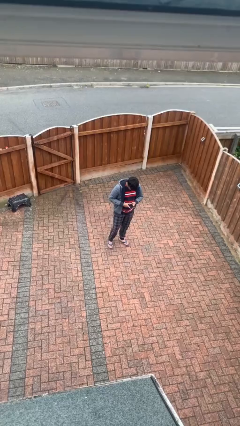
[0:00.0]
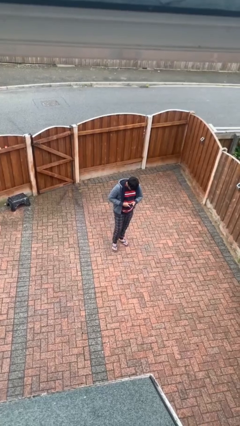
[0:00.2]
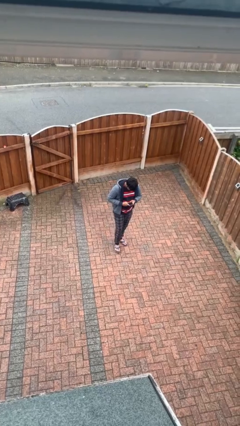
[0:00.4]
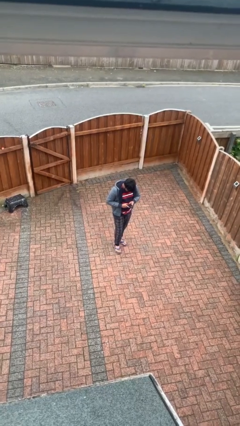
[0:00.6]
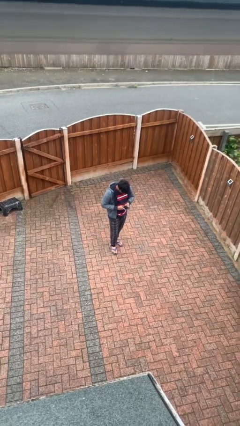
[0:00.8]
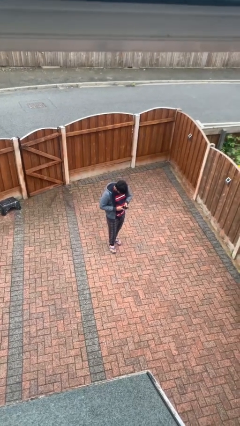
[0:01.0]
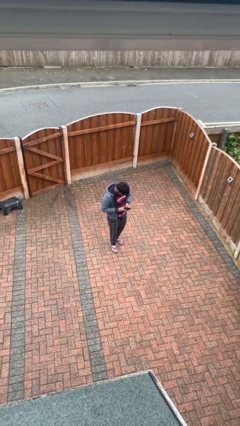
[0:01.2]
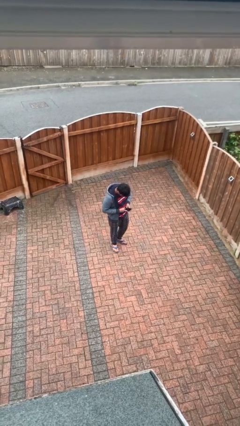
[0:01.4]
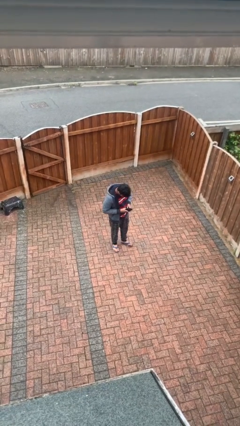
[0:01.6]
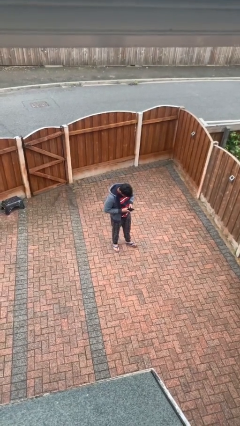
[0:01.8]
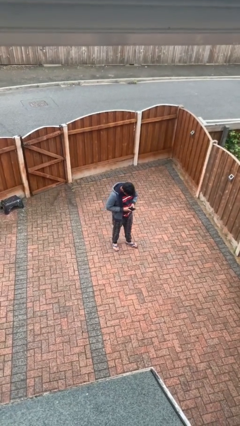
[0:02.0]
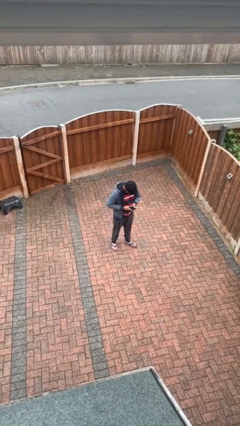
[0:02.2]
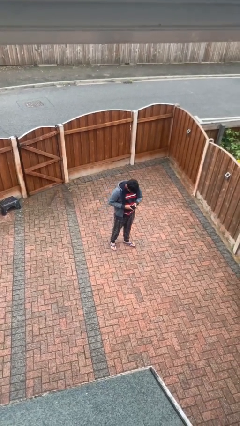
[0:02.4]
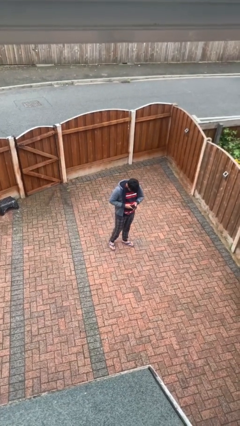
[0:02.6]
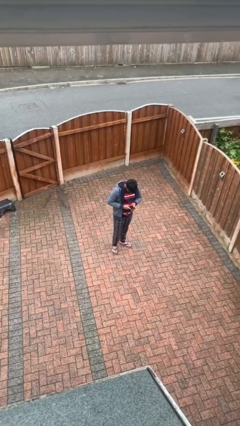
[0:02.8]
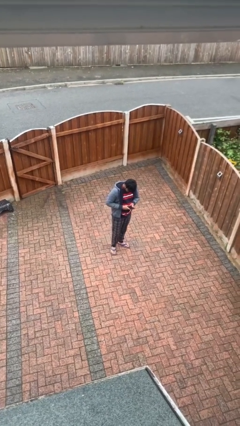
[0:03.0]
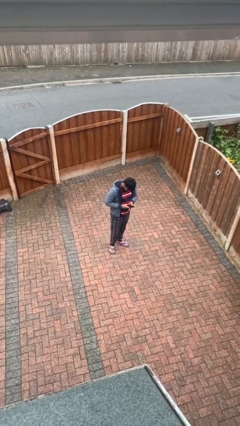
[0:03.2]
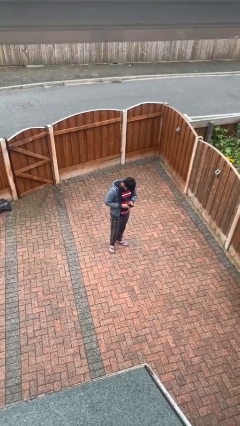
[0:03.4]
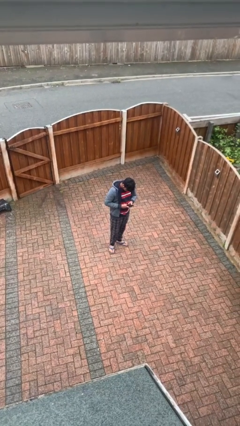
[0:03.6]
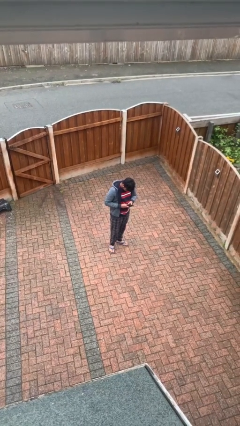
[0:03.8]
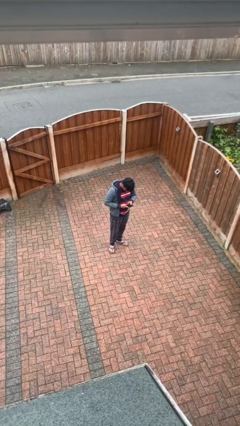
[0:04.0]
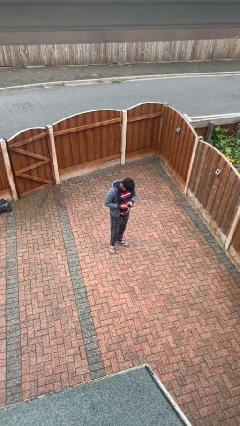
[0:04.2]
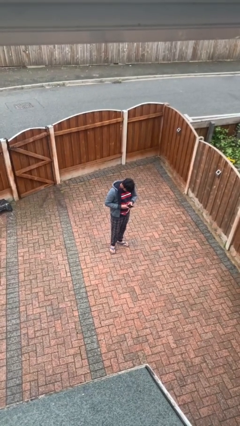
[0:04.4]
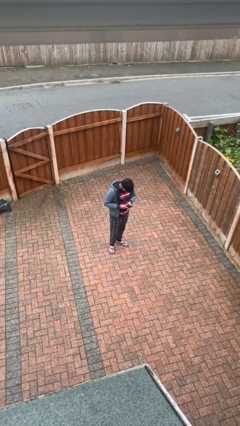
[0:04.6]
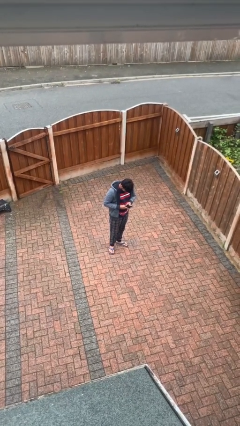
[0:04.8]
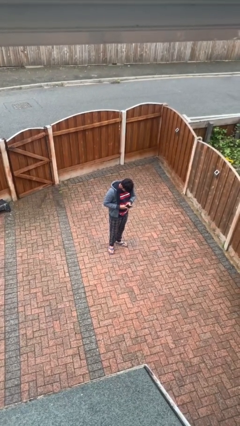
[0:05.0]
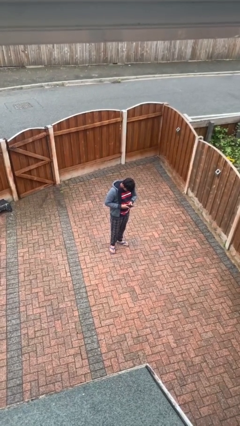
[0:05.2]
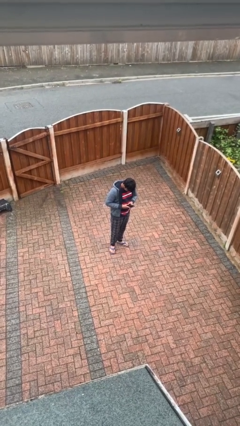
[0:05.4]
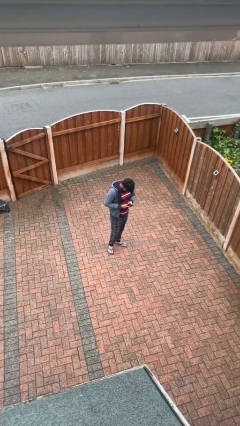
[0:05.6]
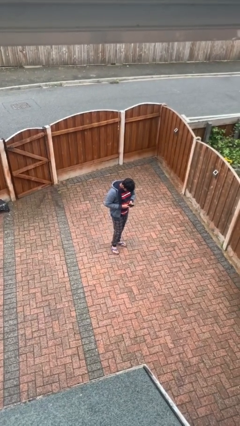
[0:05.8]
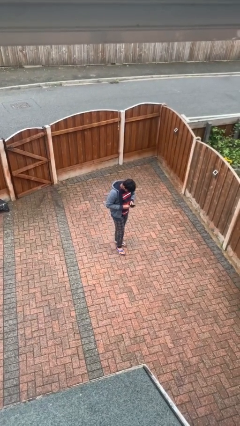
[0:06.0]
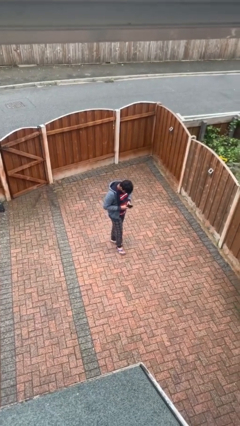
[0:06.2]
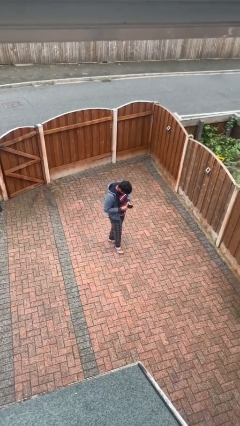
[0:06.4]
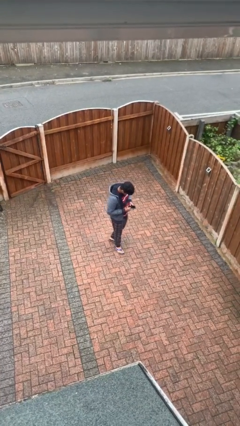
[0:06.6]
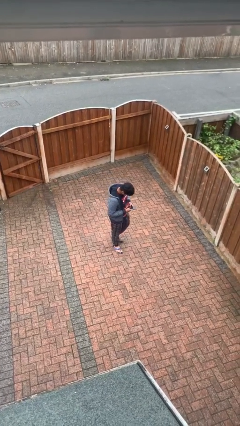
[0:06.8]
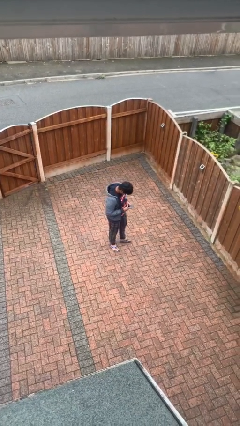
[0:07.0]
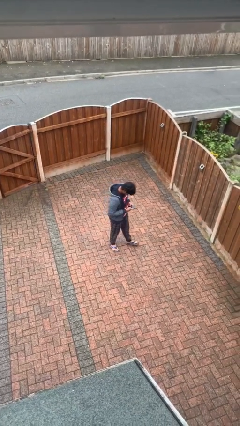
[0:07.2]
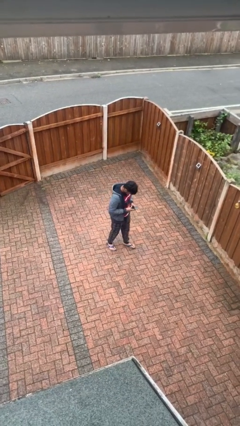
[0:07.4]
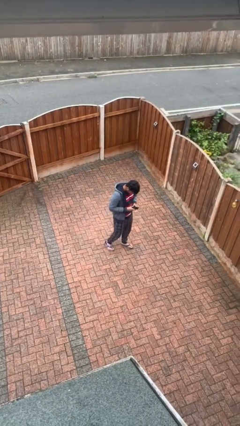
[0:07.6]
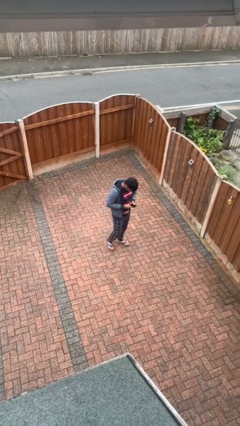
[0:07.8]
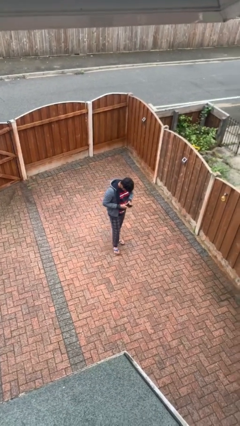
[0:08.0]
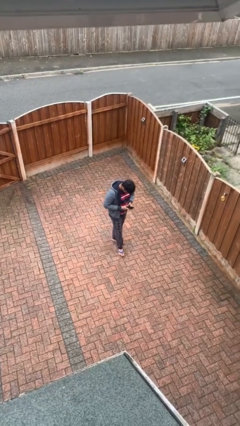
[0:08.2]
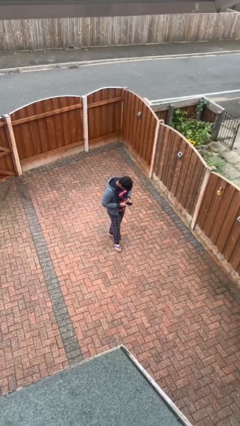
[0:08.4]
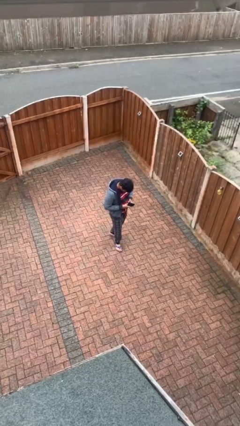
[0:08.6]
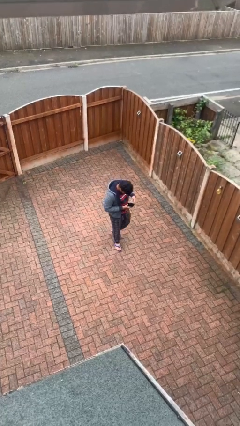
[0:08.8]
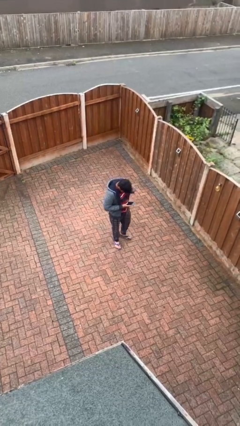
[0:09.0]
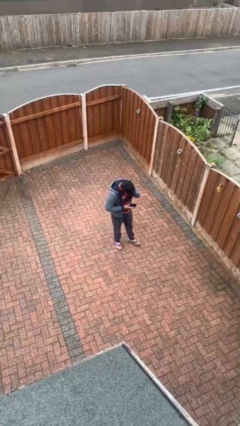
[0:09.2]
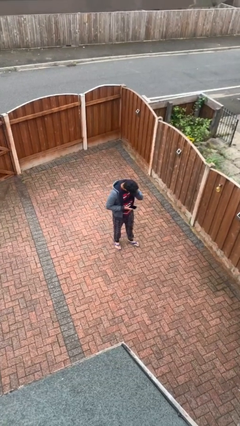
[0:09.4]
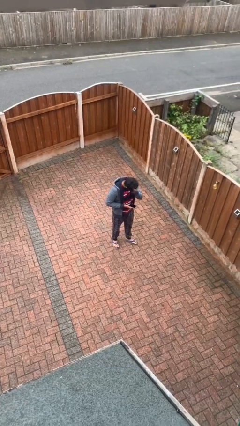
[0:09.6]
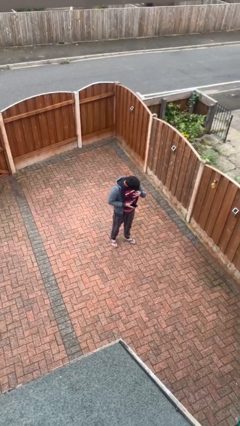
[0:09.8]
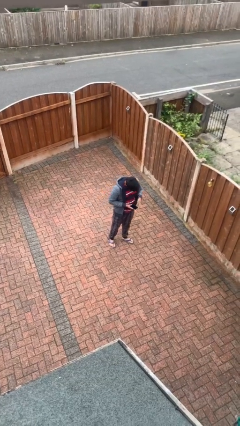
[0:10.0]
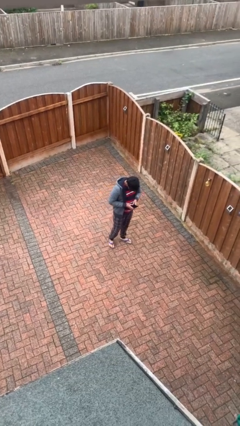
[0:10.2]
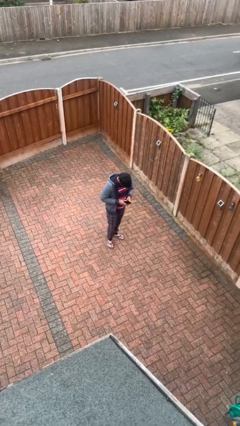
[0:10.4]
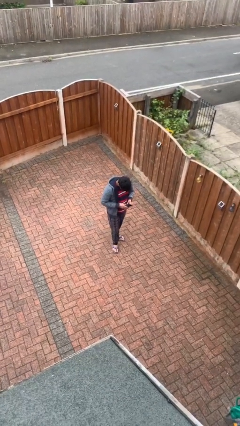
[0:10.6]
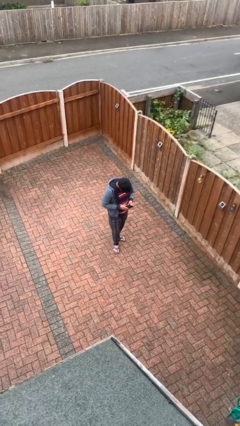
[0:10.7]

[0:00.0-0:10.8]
person texts on phone

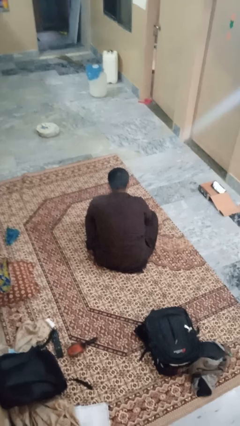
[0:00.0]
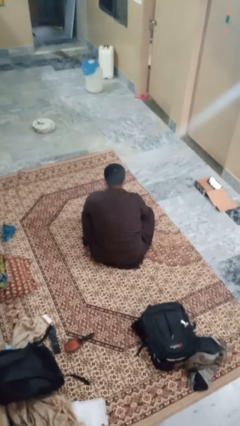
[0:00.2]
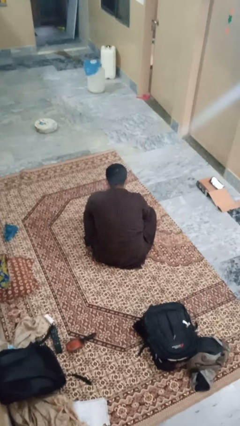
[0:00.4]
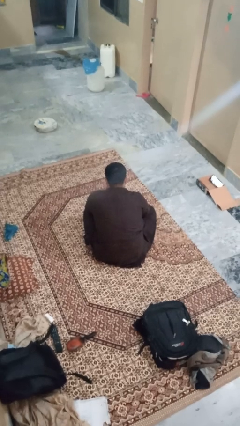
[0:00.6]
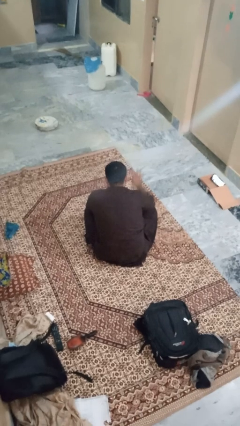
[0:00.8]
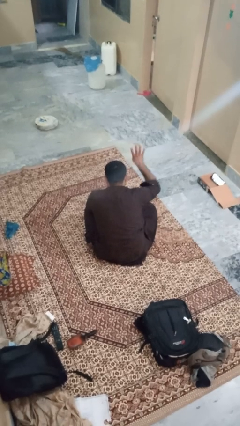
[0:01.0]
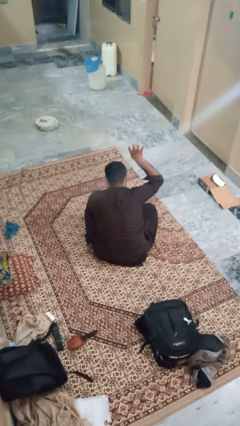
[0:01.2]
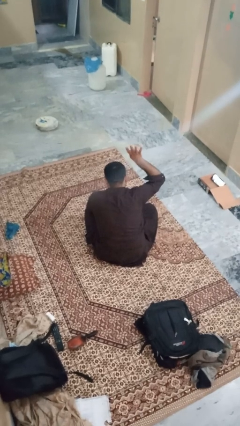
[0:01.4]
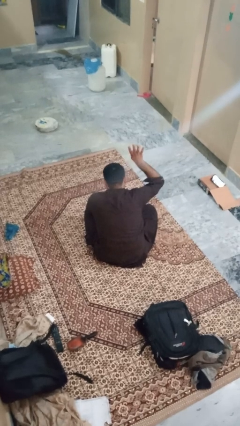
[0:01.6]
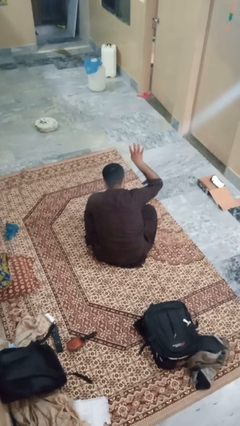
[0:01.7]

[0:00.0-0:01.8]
person gestures number four

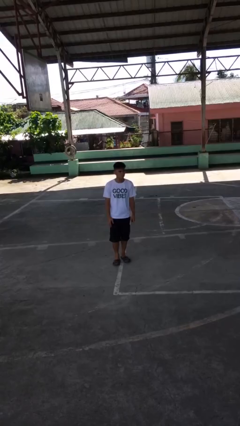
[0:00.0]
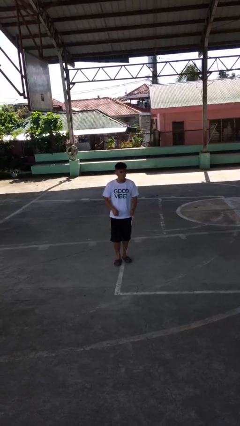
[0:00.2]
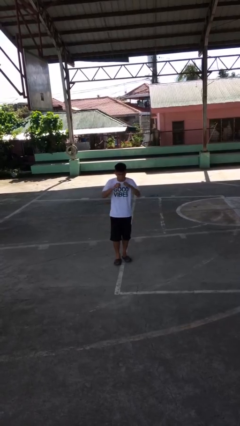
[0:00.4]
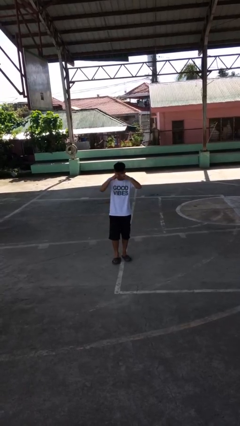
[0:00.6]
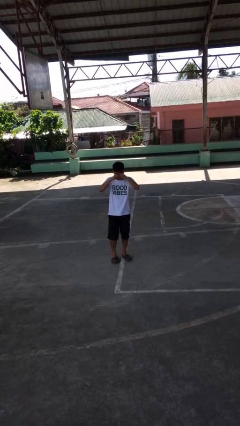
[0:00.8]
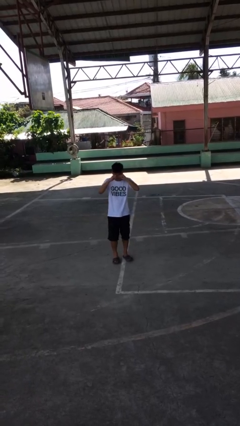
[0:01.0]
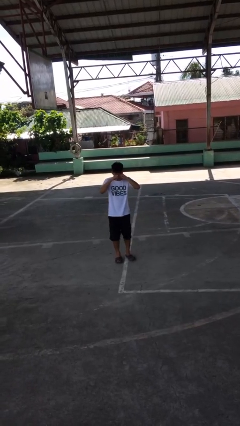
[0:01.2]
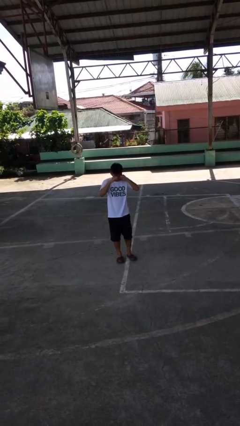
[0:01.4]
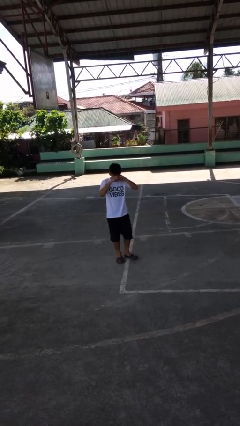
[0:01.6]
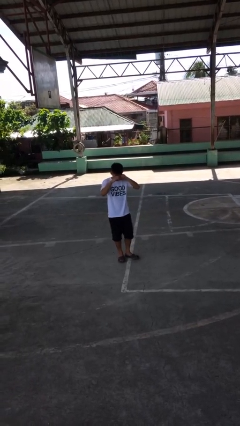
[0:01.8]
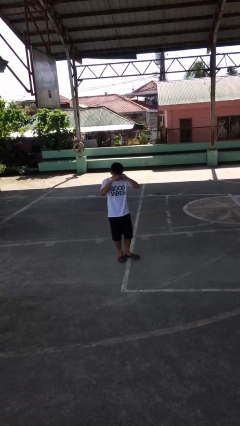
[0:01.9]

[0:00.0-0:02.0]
person rubs eyes

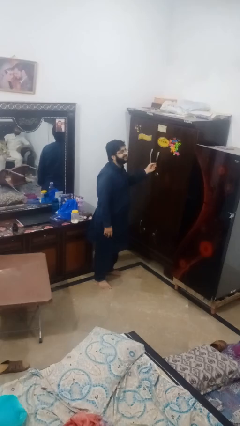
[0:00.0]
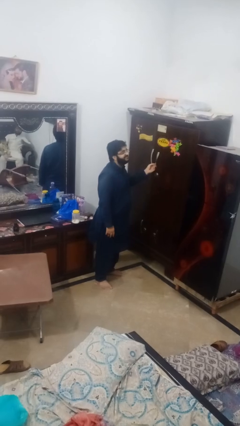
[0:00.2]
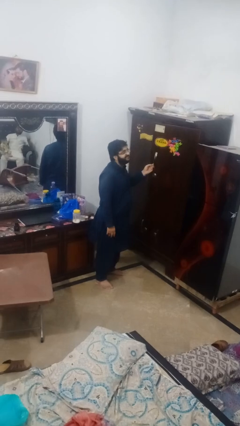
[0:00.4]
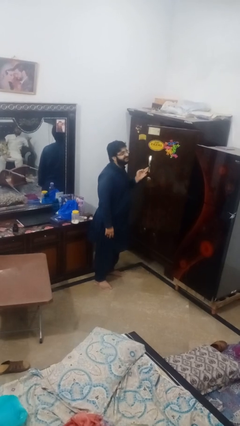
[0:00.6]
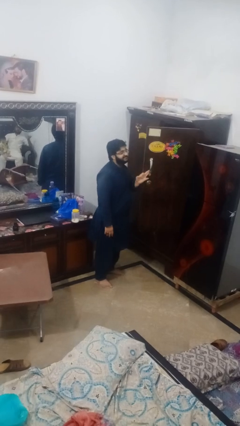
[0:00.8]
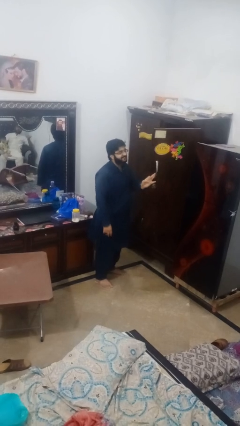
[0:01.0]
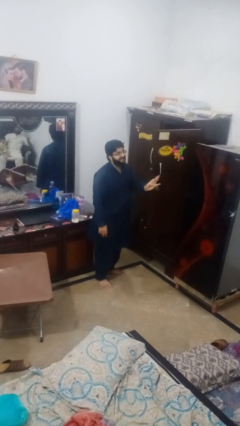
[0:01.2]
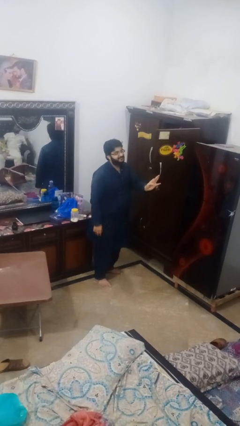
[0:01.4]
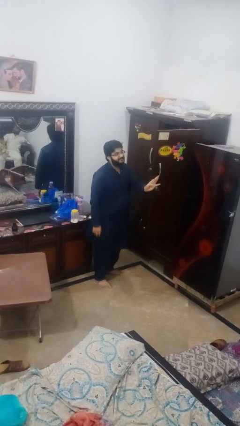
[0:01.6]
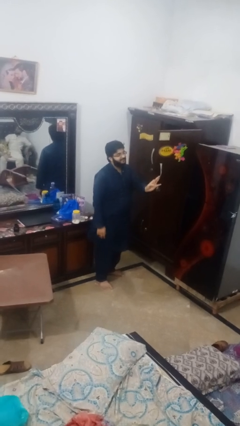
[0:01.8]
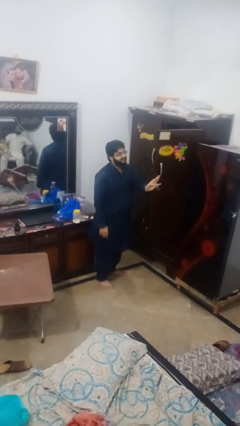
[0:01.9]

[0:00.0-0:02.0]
person opens closet door

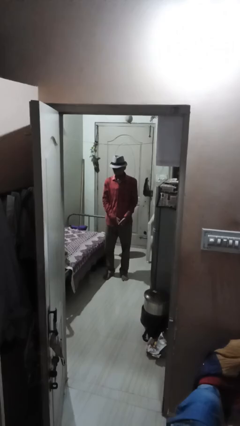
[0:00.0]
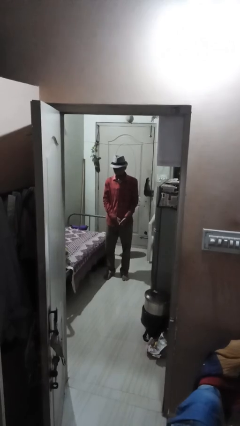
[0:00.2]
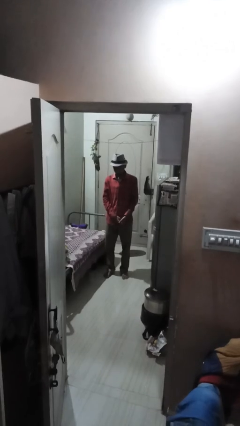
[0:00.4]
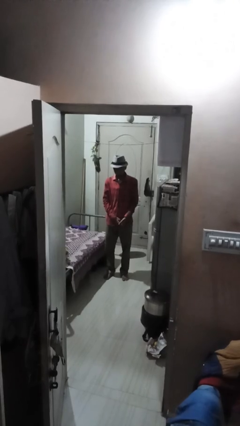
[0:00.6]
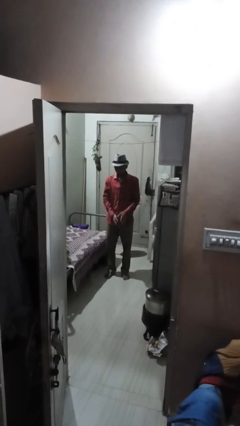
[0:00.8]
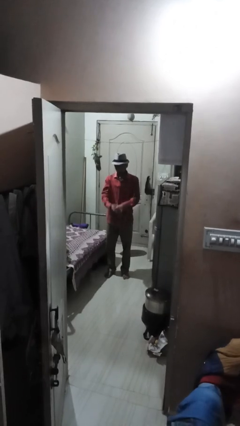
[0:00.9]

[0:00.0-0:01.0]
person cracks knuckles

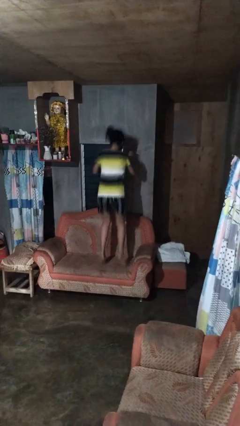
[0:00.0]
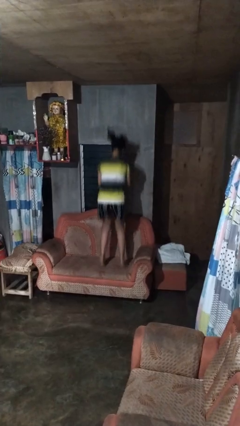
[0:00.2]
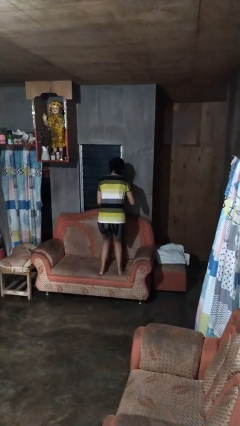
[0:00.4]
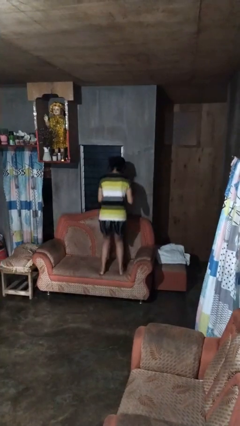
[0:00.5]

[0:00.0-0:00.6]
person jumps on couch
